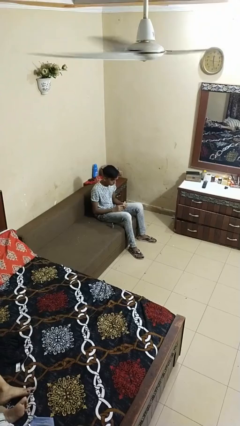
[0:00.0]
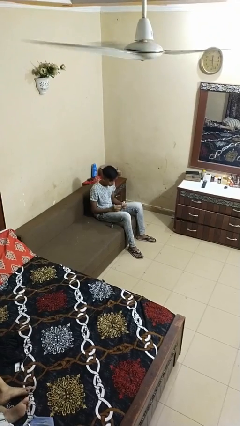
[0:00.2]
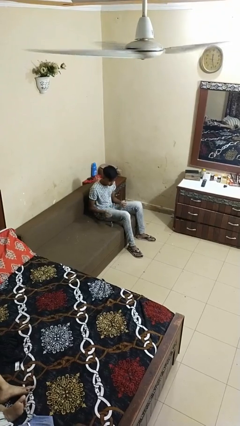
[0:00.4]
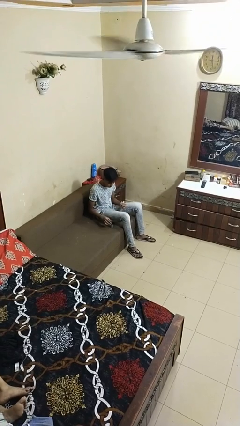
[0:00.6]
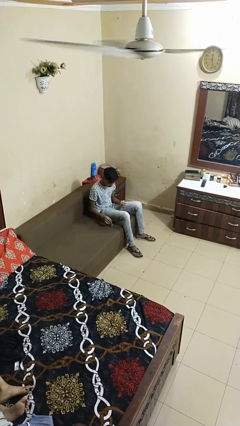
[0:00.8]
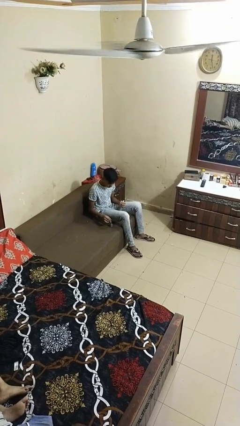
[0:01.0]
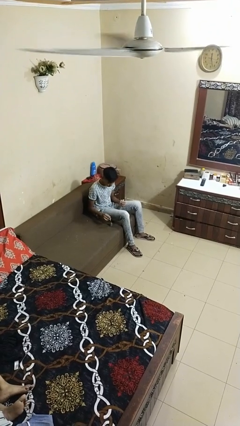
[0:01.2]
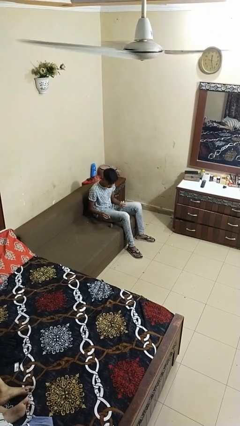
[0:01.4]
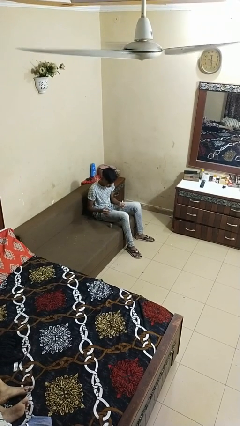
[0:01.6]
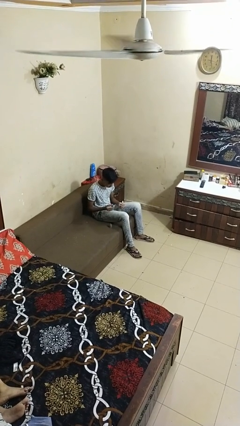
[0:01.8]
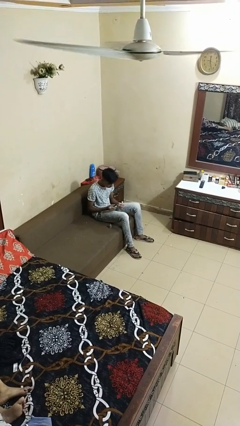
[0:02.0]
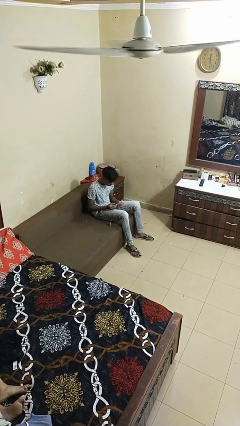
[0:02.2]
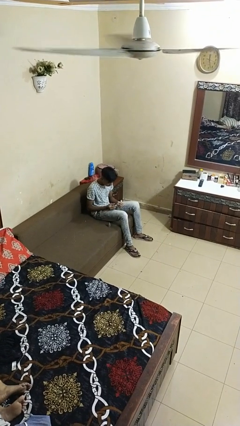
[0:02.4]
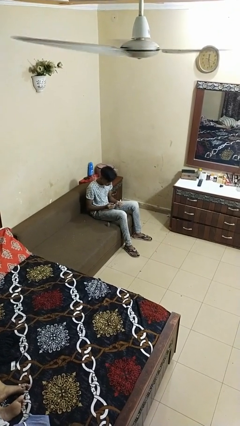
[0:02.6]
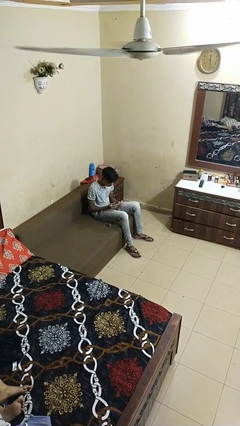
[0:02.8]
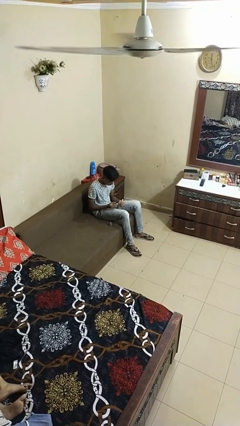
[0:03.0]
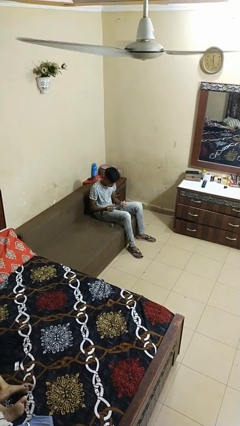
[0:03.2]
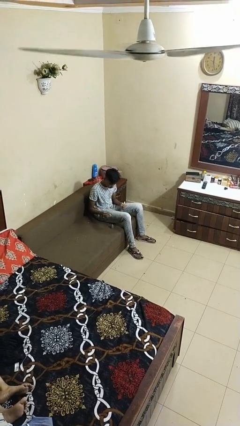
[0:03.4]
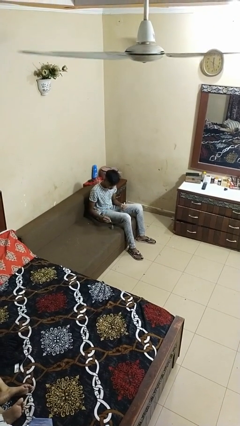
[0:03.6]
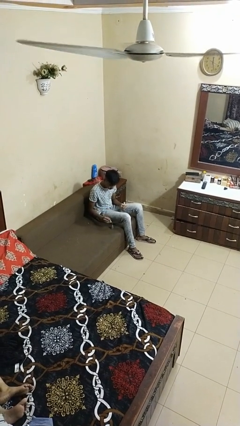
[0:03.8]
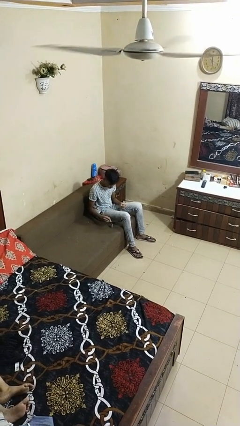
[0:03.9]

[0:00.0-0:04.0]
person paints fingernails

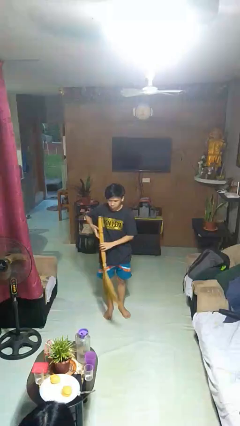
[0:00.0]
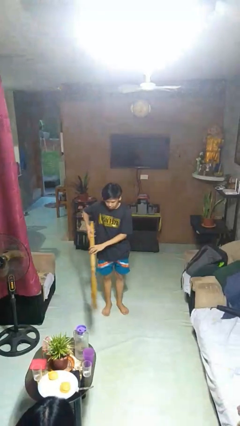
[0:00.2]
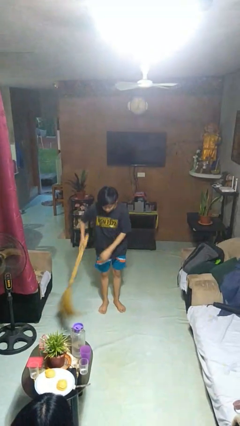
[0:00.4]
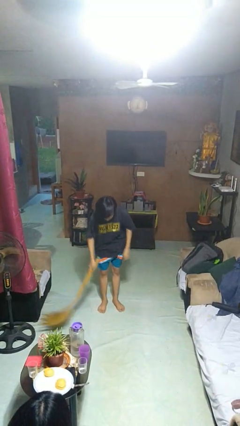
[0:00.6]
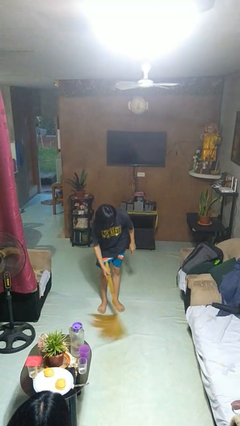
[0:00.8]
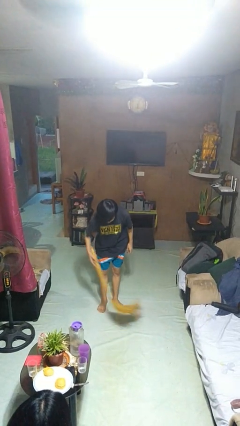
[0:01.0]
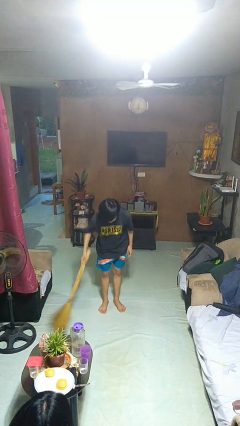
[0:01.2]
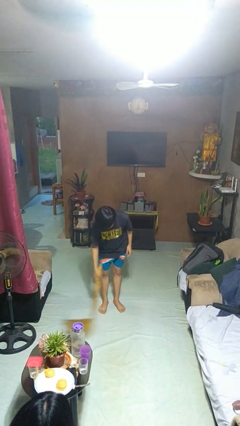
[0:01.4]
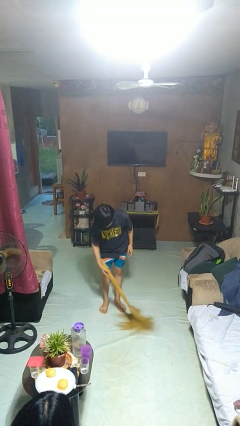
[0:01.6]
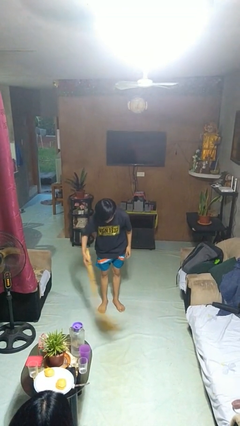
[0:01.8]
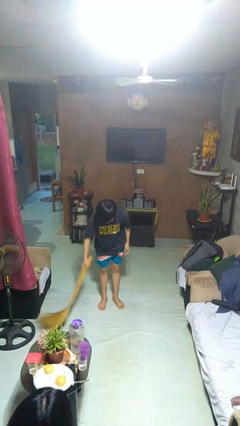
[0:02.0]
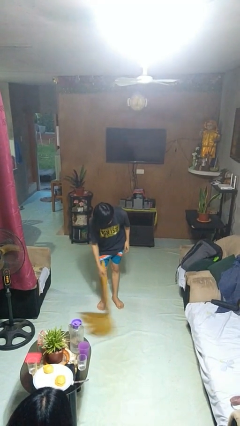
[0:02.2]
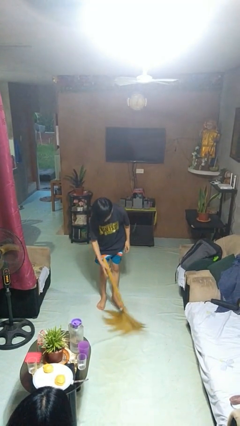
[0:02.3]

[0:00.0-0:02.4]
person sweeps floor

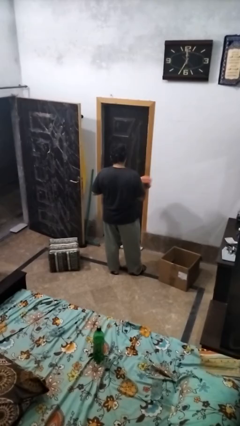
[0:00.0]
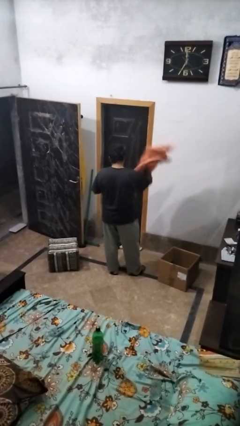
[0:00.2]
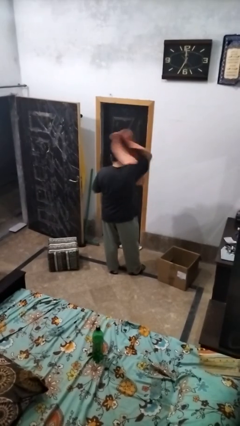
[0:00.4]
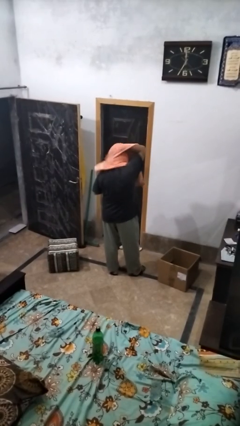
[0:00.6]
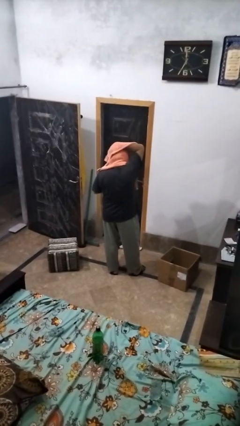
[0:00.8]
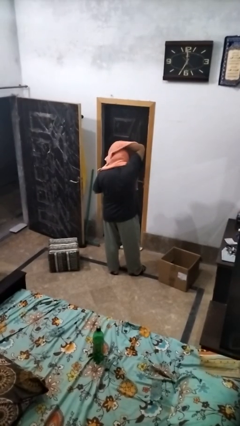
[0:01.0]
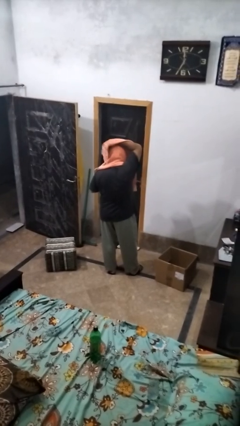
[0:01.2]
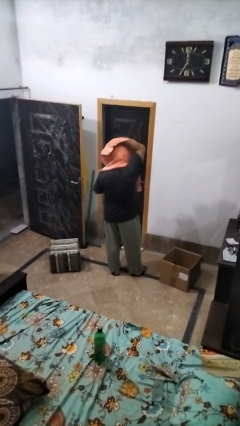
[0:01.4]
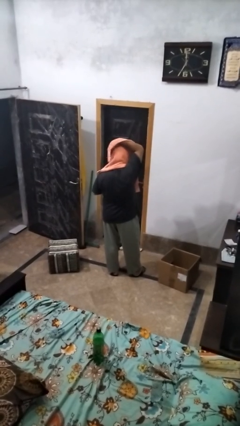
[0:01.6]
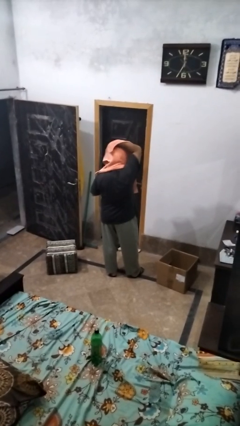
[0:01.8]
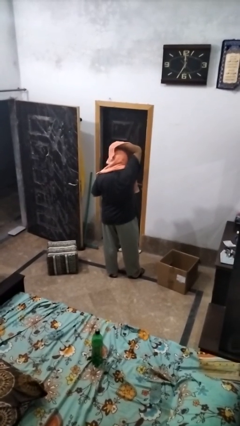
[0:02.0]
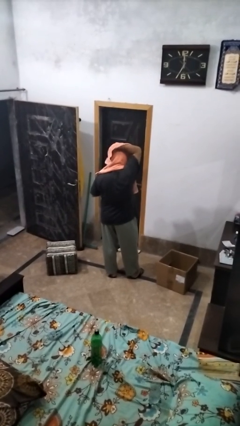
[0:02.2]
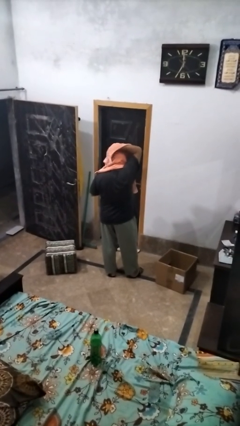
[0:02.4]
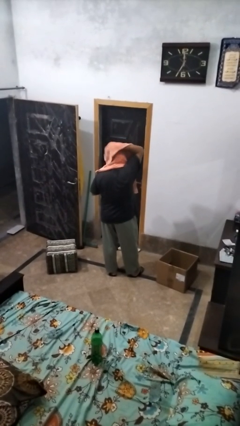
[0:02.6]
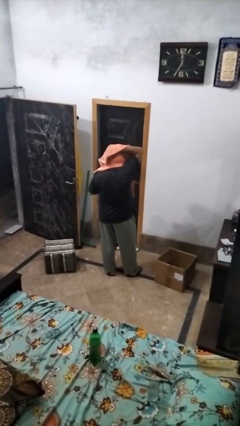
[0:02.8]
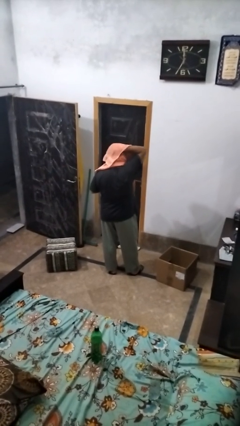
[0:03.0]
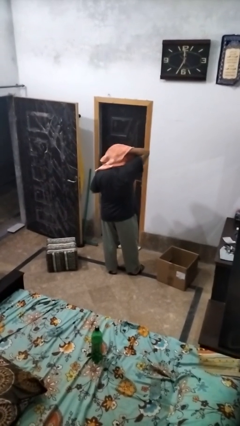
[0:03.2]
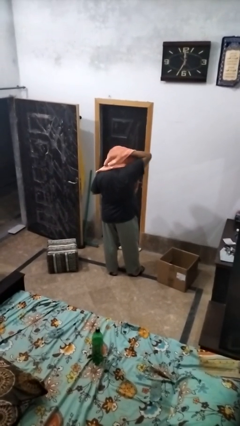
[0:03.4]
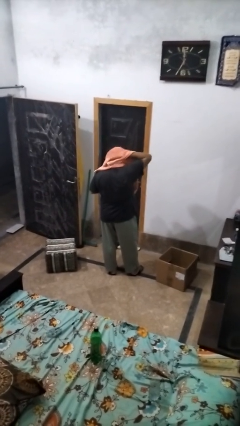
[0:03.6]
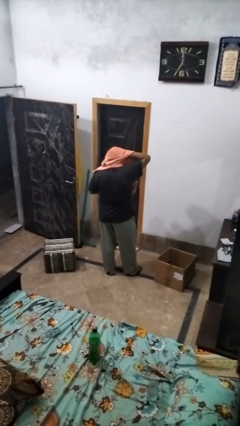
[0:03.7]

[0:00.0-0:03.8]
person dries hair with towel

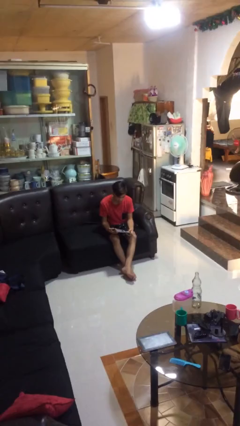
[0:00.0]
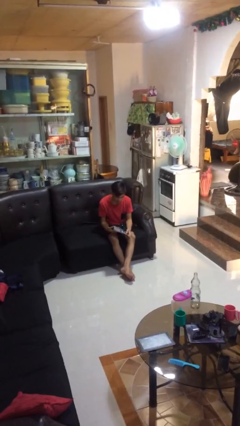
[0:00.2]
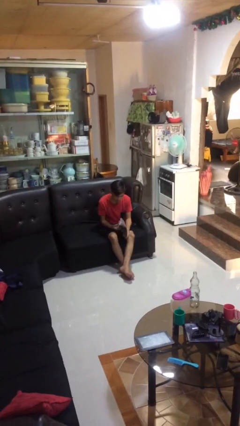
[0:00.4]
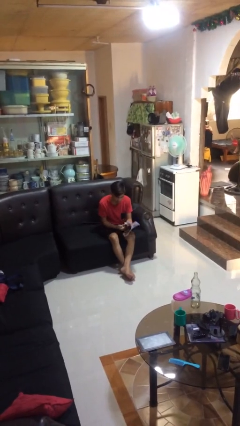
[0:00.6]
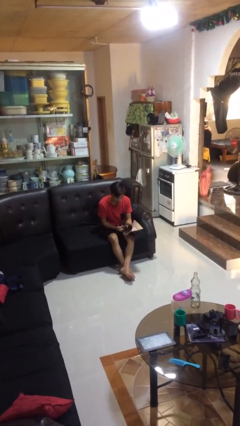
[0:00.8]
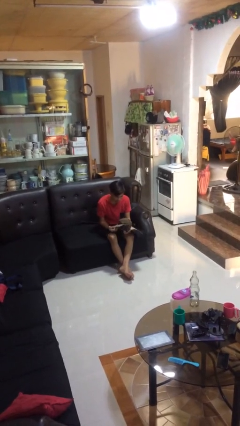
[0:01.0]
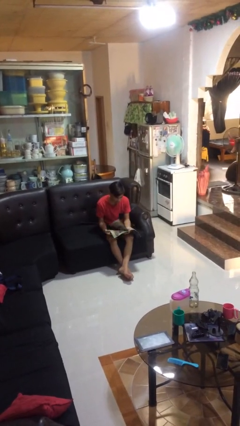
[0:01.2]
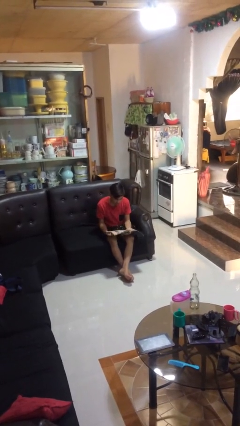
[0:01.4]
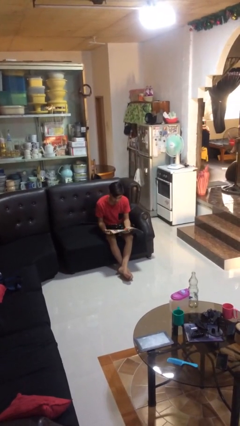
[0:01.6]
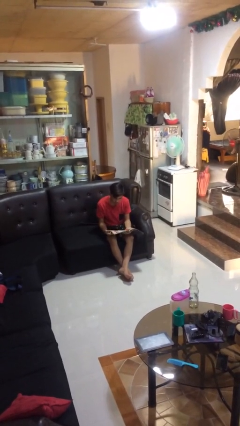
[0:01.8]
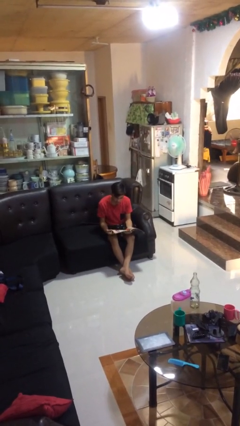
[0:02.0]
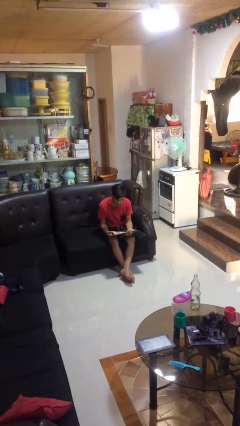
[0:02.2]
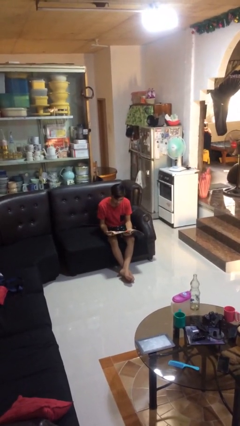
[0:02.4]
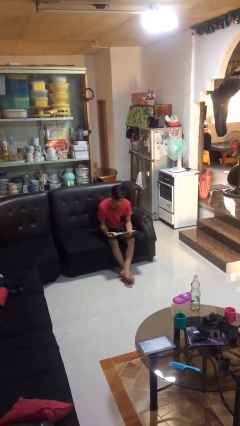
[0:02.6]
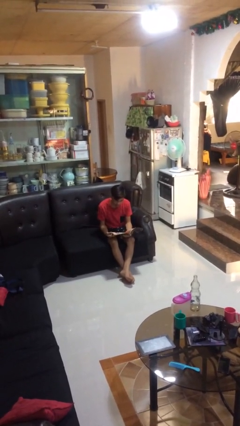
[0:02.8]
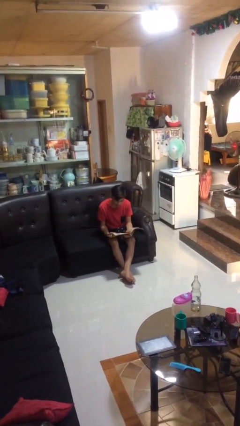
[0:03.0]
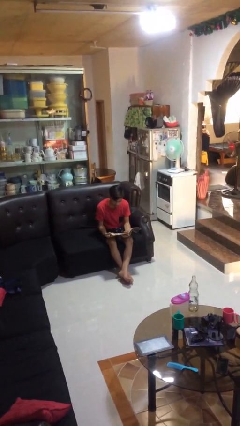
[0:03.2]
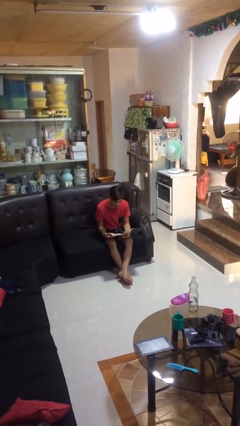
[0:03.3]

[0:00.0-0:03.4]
person reads magazine

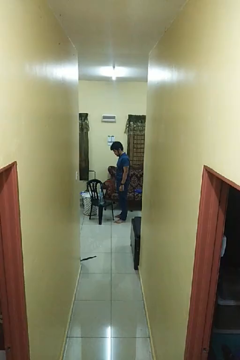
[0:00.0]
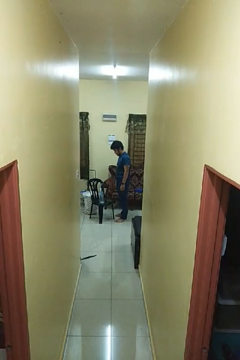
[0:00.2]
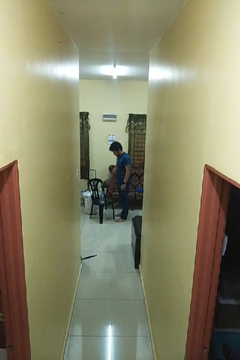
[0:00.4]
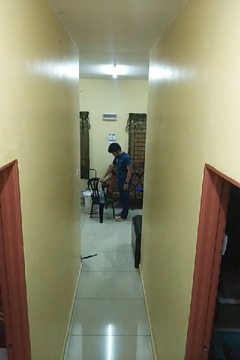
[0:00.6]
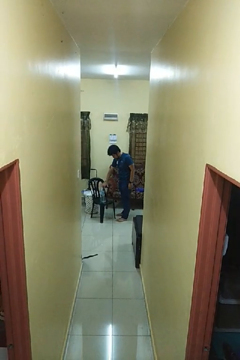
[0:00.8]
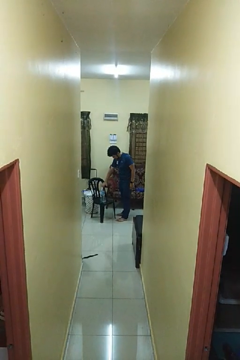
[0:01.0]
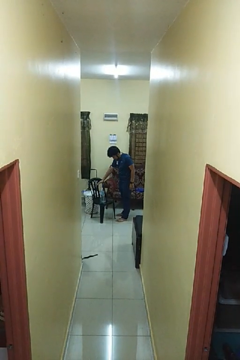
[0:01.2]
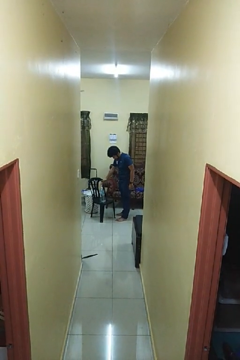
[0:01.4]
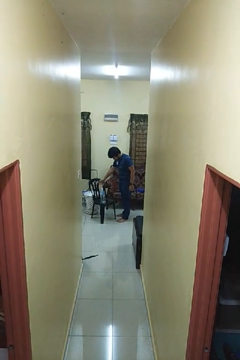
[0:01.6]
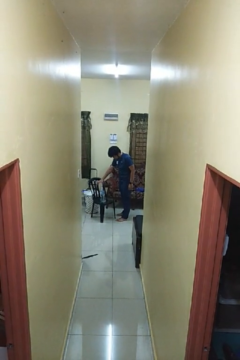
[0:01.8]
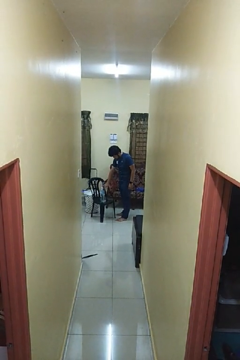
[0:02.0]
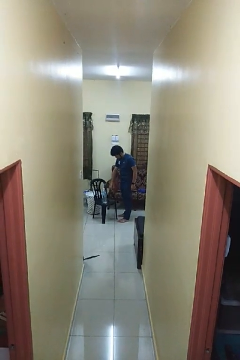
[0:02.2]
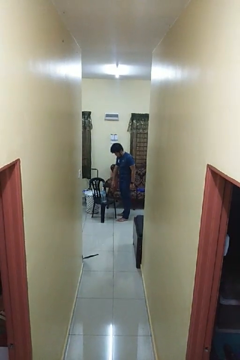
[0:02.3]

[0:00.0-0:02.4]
person waves hand over object

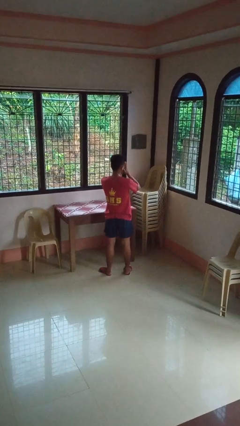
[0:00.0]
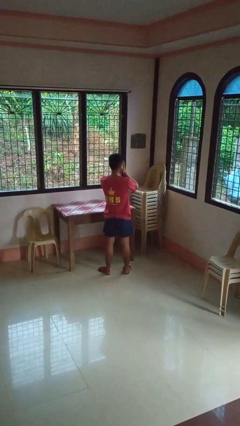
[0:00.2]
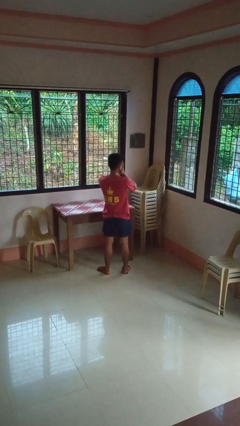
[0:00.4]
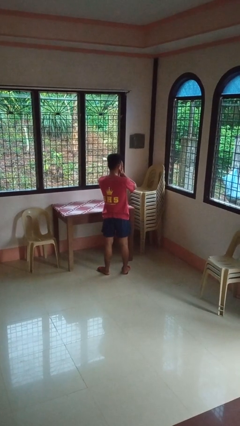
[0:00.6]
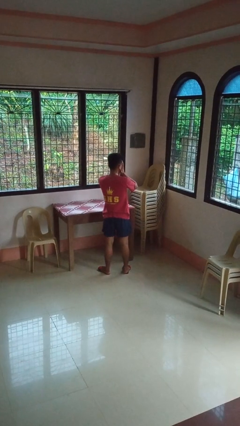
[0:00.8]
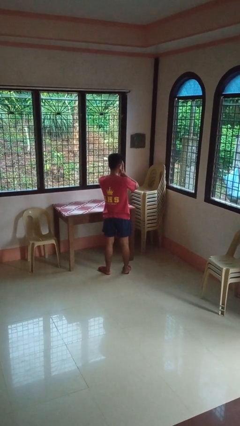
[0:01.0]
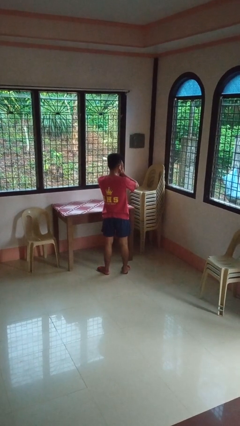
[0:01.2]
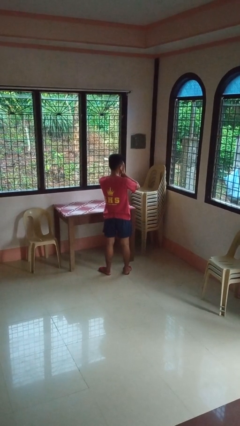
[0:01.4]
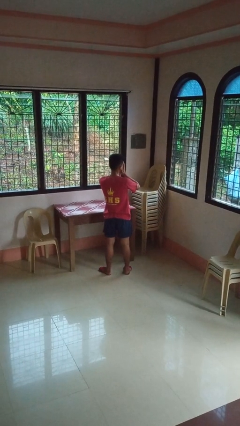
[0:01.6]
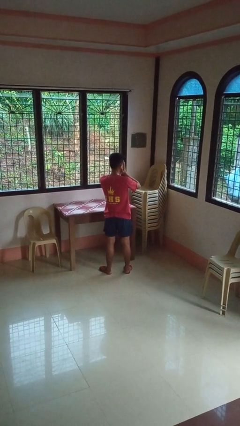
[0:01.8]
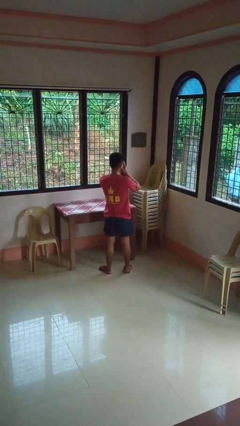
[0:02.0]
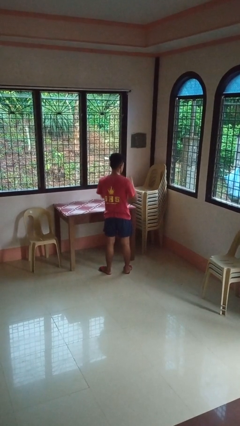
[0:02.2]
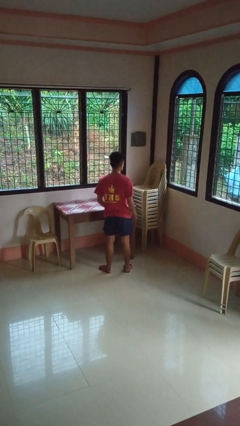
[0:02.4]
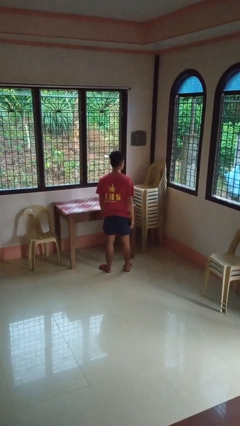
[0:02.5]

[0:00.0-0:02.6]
person covers face with hands
